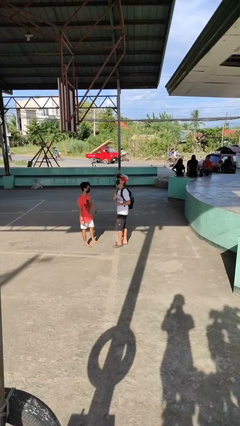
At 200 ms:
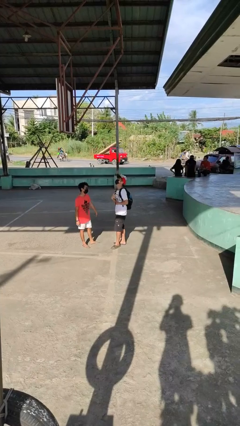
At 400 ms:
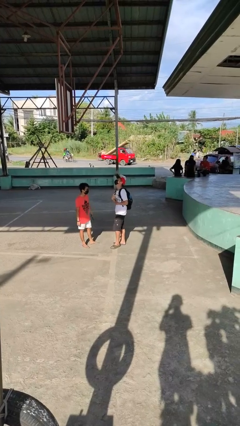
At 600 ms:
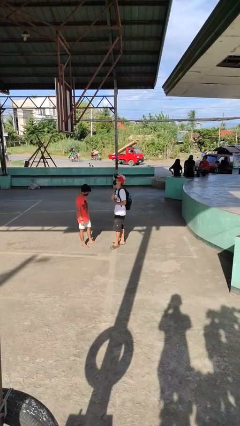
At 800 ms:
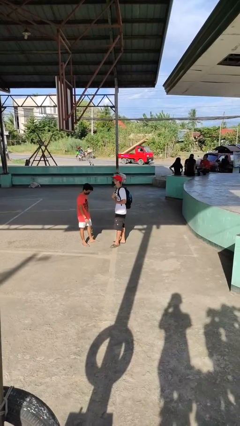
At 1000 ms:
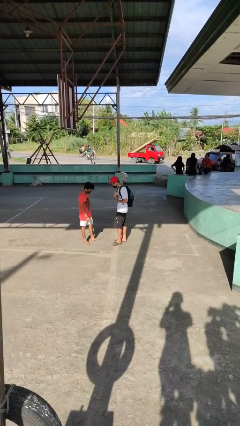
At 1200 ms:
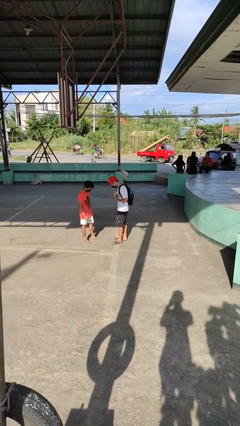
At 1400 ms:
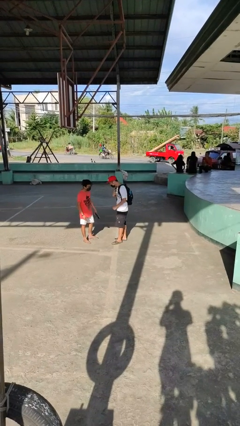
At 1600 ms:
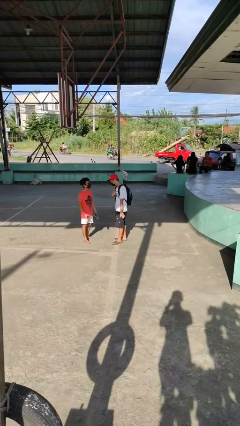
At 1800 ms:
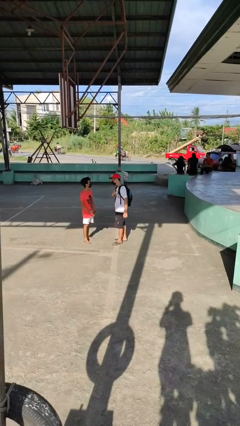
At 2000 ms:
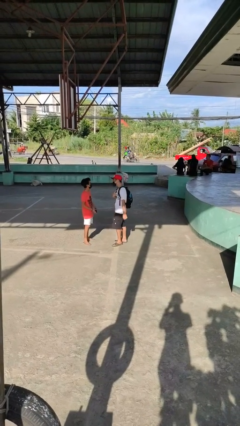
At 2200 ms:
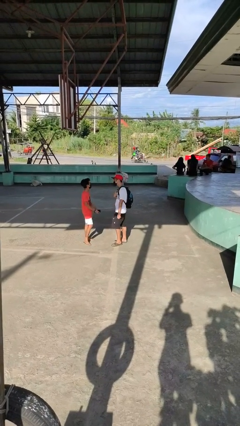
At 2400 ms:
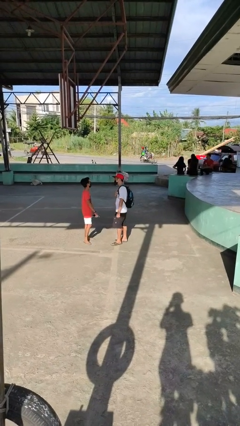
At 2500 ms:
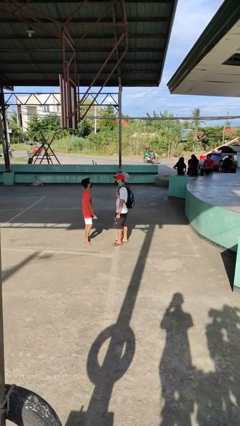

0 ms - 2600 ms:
person laughs with person

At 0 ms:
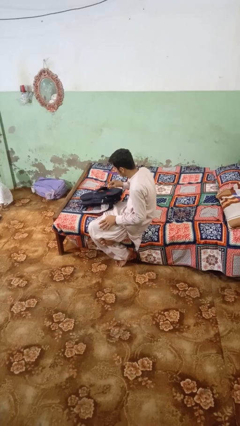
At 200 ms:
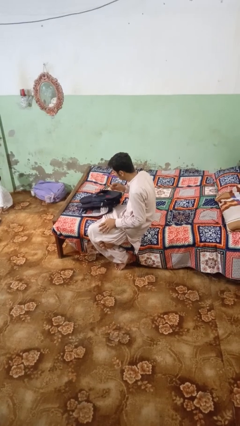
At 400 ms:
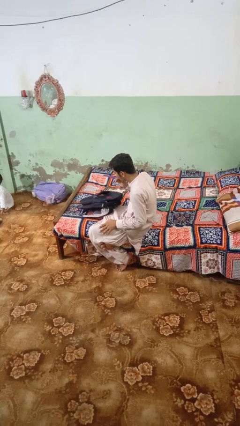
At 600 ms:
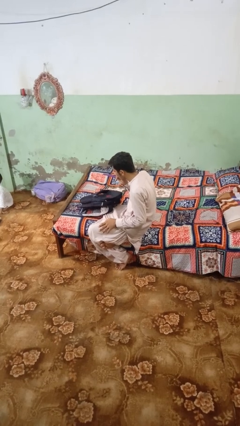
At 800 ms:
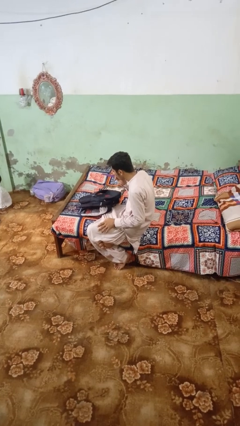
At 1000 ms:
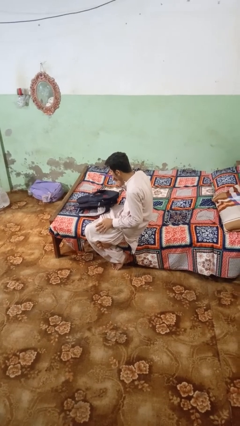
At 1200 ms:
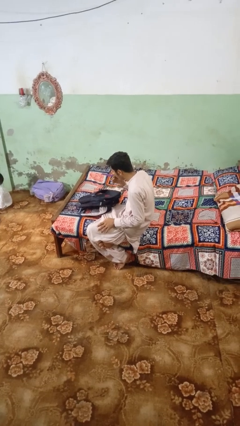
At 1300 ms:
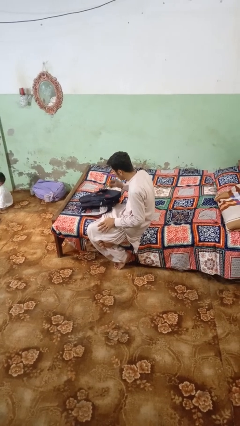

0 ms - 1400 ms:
person eats snack from bag

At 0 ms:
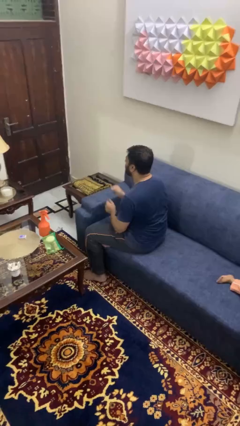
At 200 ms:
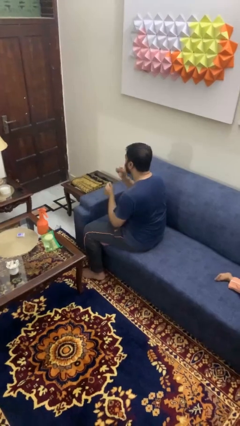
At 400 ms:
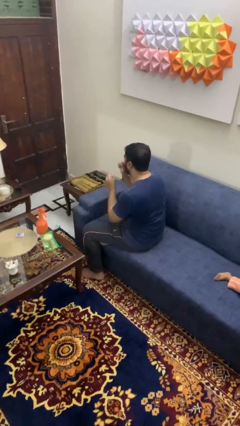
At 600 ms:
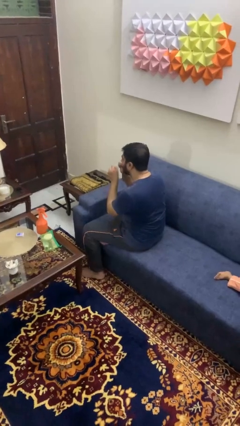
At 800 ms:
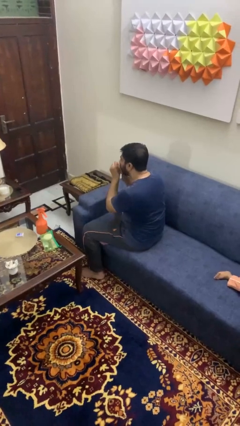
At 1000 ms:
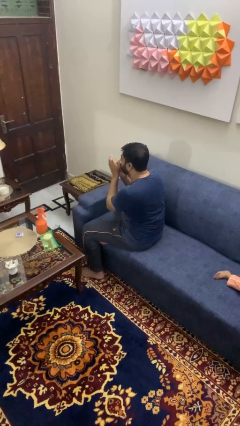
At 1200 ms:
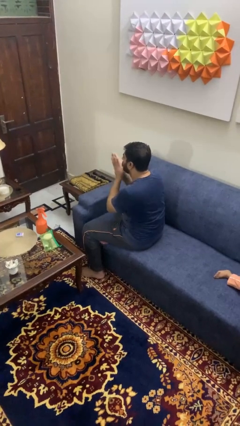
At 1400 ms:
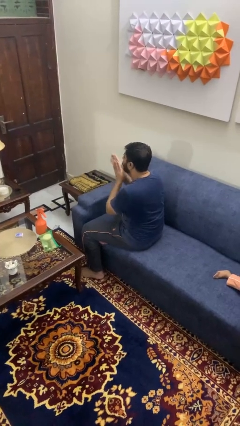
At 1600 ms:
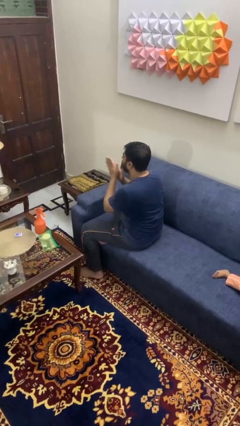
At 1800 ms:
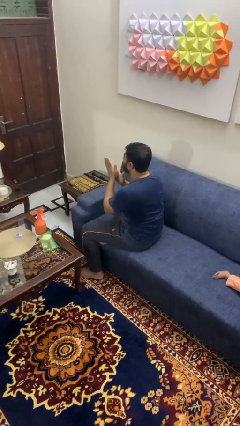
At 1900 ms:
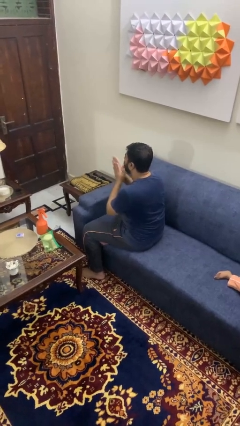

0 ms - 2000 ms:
person blows into hands

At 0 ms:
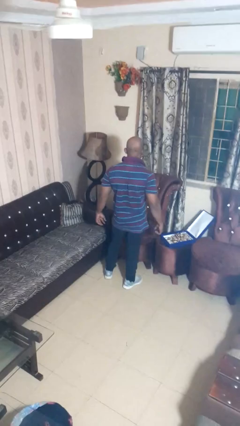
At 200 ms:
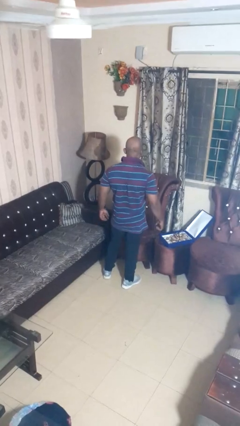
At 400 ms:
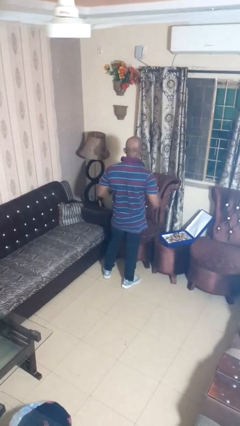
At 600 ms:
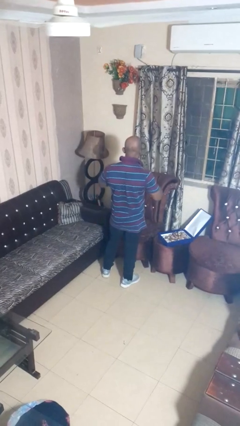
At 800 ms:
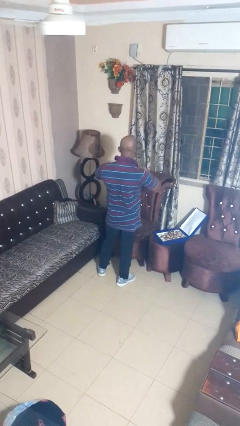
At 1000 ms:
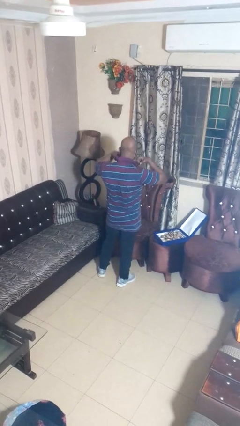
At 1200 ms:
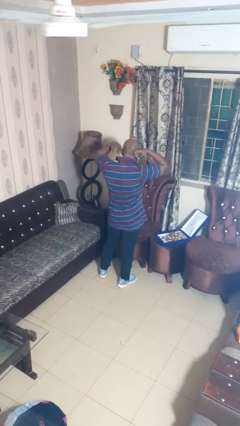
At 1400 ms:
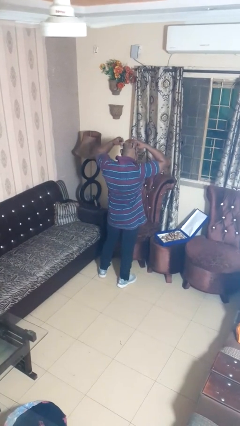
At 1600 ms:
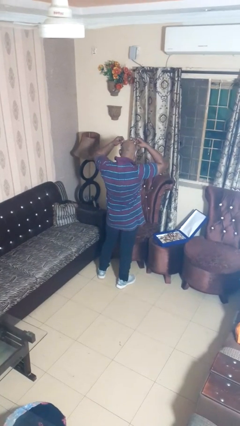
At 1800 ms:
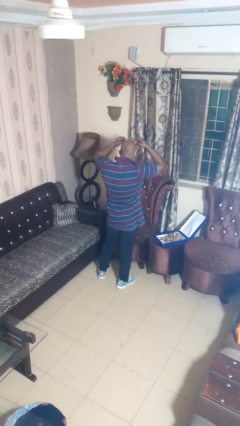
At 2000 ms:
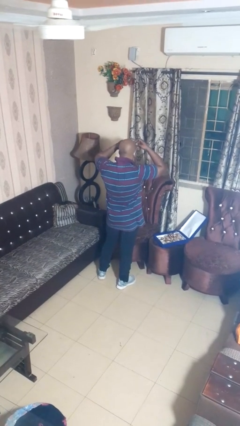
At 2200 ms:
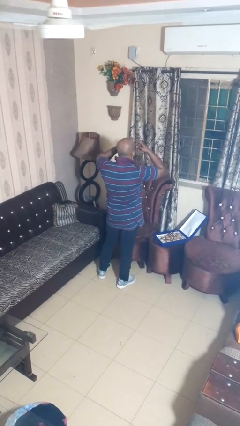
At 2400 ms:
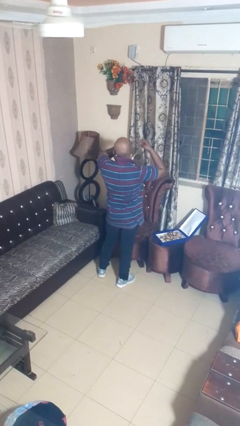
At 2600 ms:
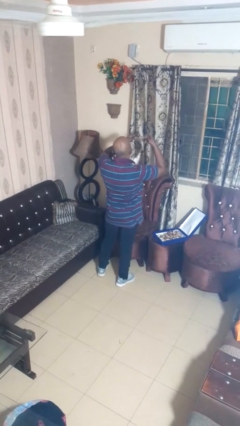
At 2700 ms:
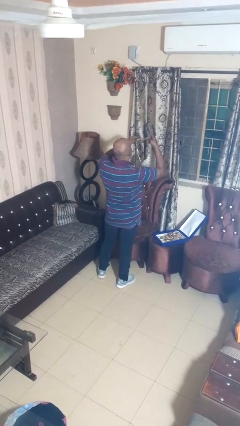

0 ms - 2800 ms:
person takes off necklace

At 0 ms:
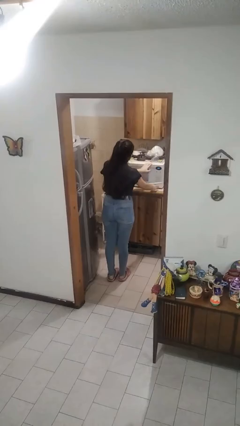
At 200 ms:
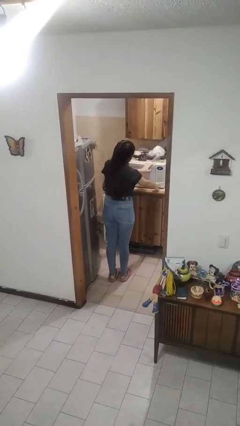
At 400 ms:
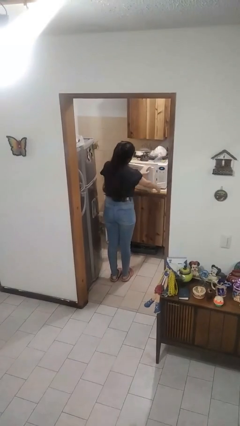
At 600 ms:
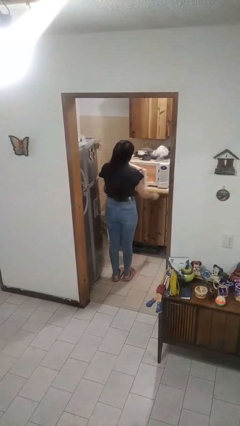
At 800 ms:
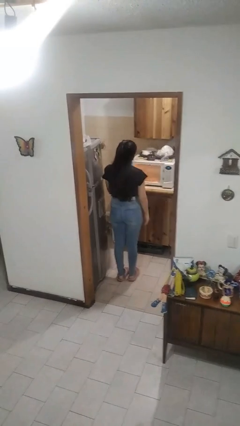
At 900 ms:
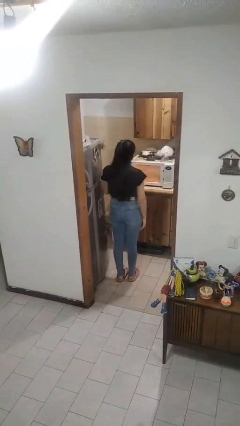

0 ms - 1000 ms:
person opens microwave

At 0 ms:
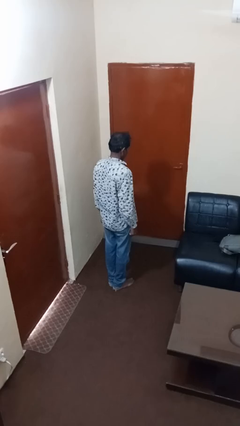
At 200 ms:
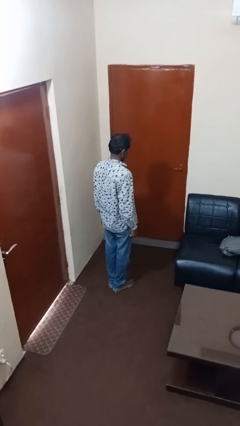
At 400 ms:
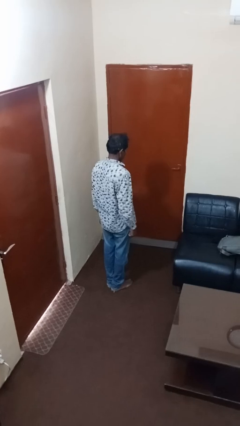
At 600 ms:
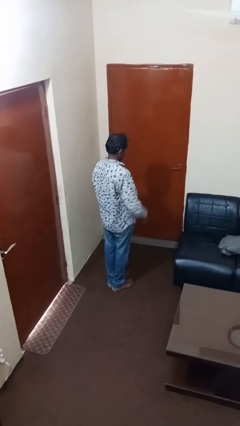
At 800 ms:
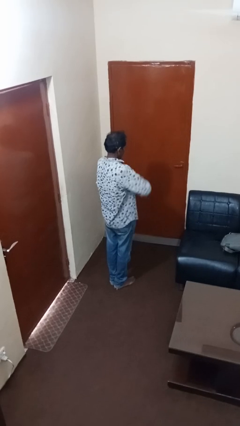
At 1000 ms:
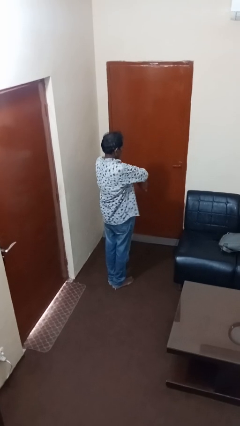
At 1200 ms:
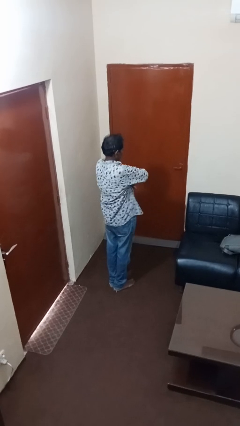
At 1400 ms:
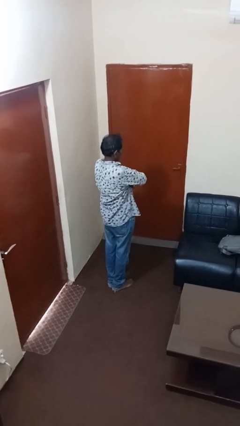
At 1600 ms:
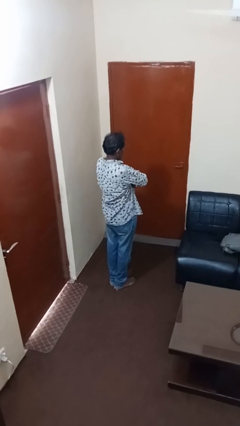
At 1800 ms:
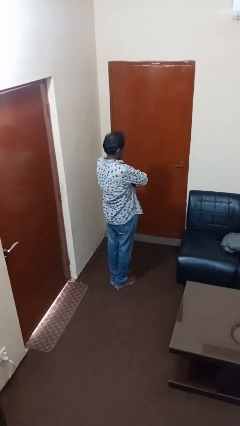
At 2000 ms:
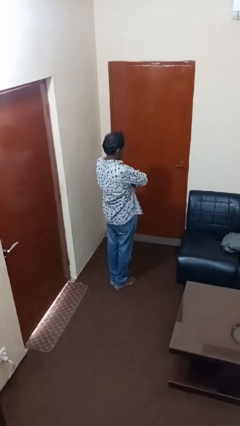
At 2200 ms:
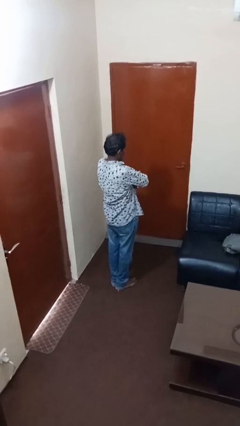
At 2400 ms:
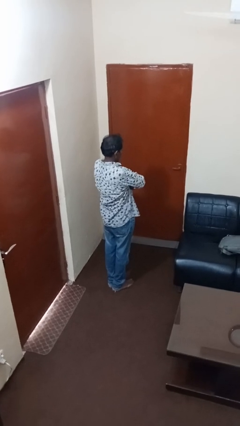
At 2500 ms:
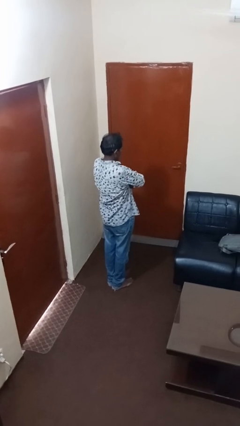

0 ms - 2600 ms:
person crosses arms

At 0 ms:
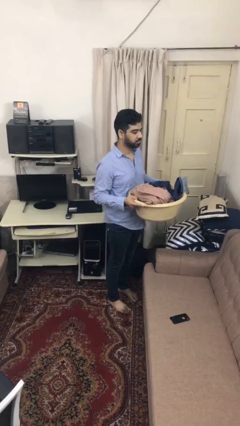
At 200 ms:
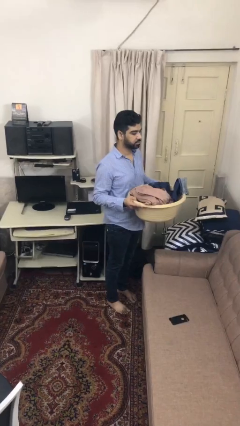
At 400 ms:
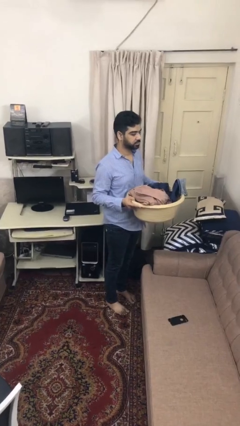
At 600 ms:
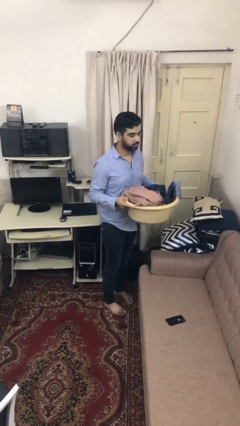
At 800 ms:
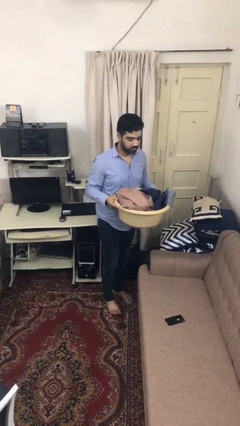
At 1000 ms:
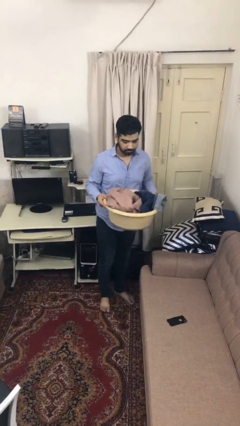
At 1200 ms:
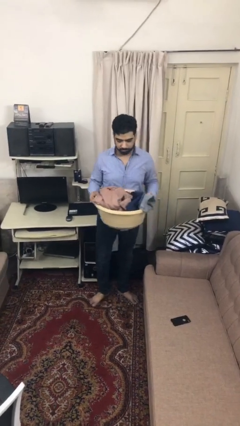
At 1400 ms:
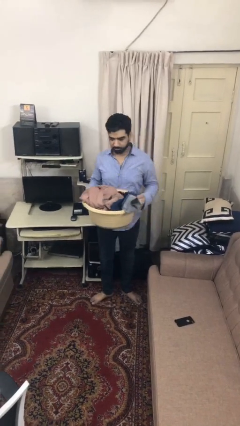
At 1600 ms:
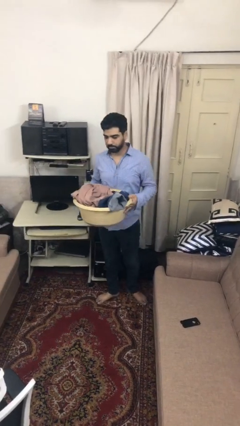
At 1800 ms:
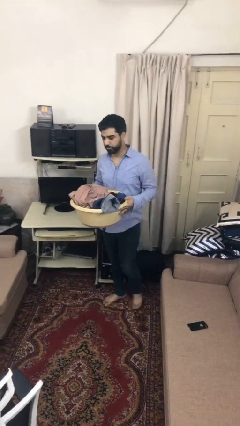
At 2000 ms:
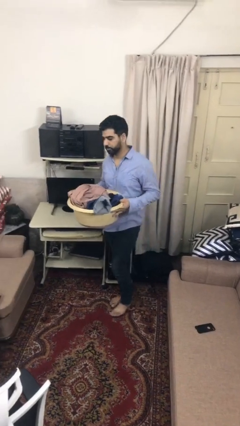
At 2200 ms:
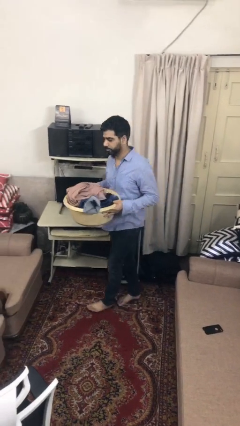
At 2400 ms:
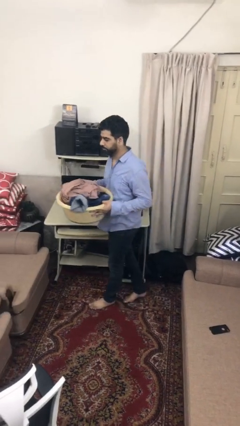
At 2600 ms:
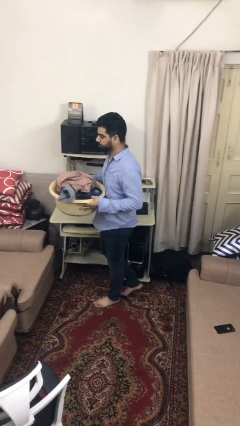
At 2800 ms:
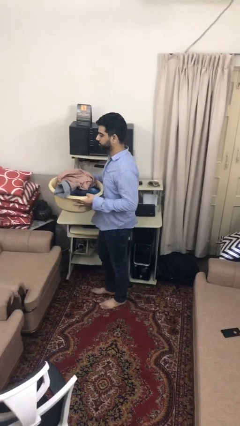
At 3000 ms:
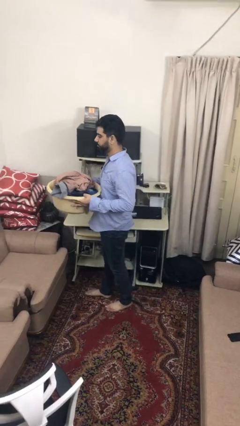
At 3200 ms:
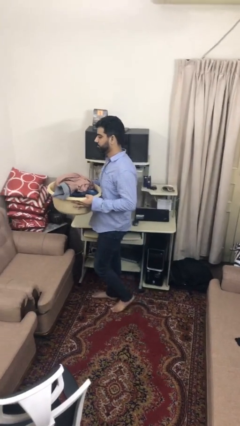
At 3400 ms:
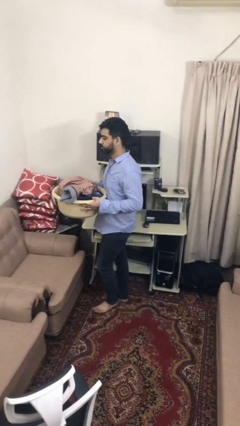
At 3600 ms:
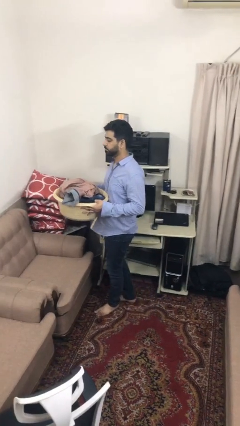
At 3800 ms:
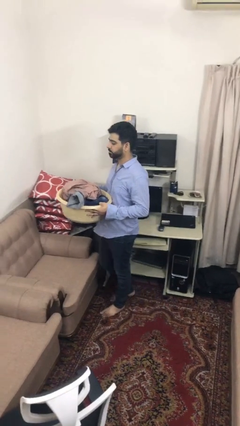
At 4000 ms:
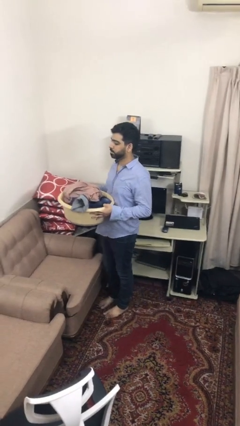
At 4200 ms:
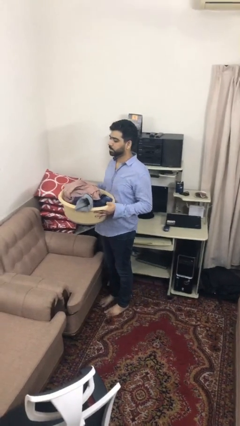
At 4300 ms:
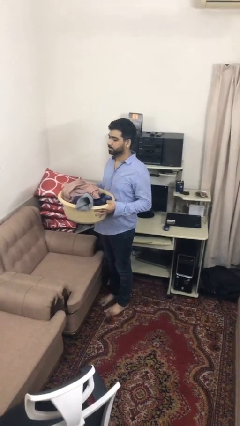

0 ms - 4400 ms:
person carries laundry basket

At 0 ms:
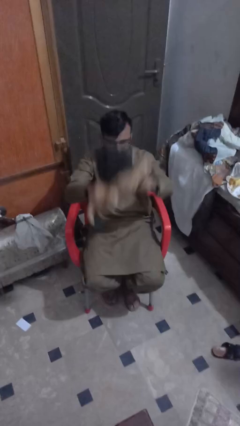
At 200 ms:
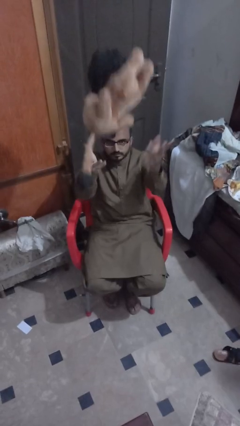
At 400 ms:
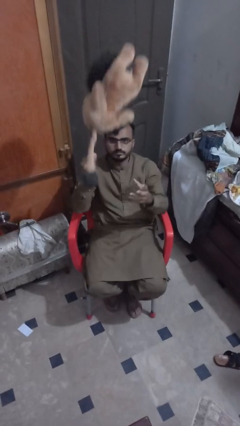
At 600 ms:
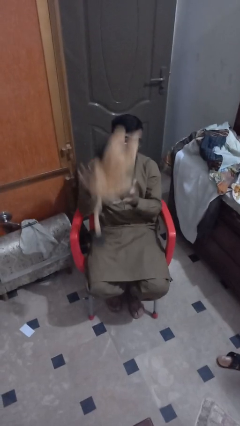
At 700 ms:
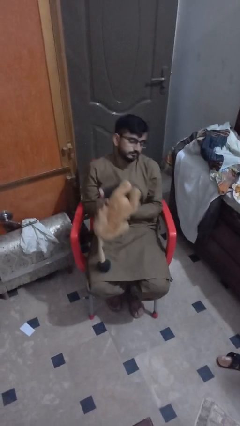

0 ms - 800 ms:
person drops object
